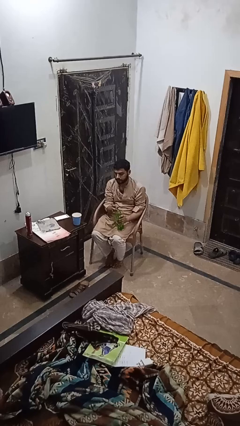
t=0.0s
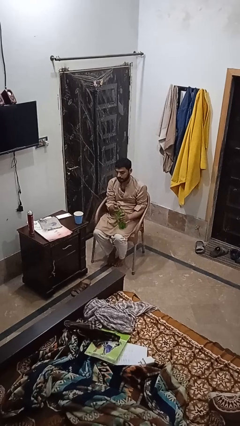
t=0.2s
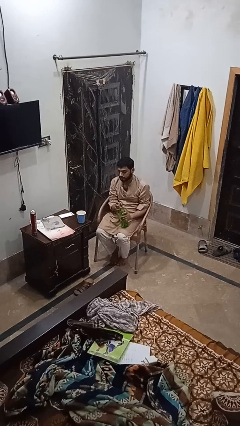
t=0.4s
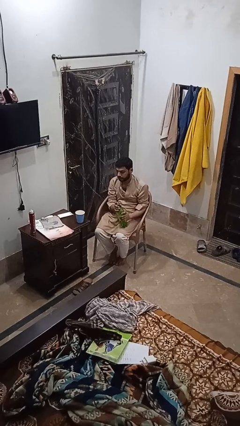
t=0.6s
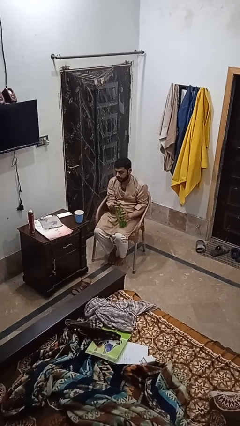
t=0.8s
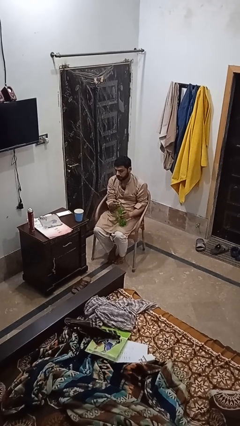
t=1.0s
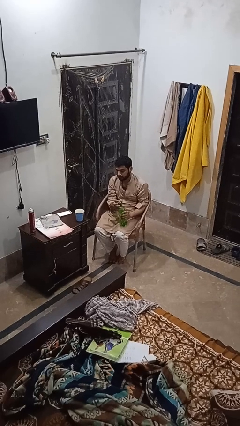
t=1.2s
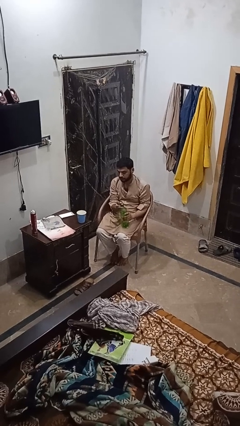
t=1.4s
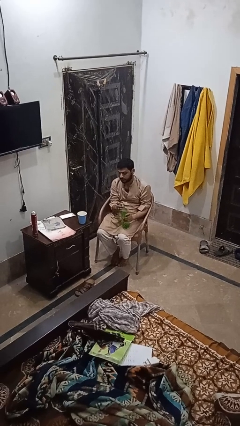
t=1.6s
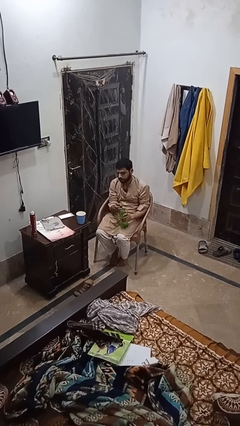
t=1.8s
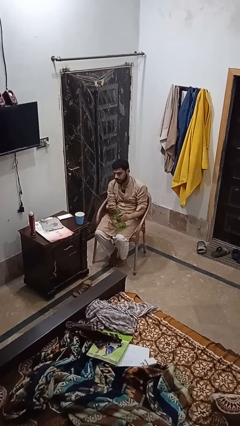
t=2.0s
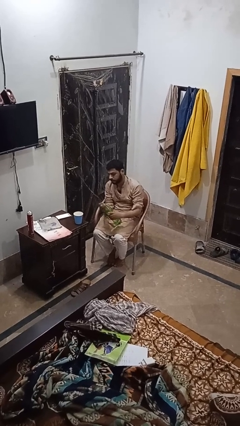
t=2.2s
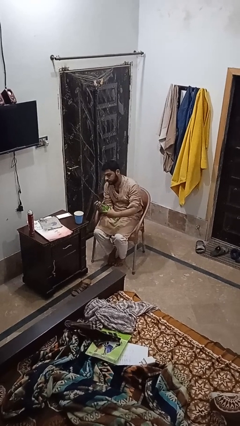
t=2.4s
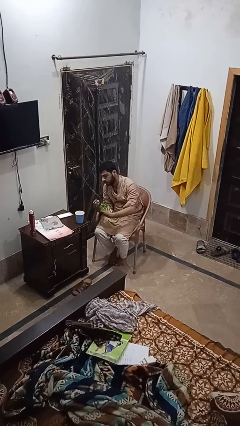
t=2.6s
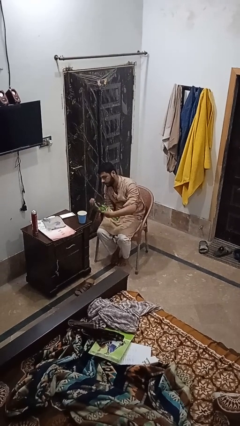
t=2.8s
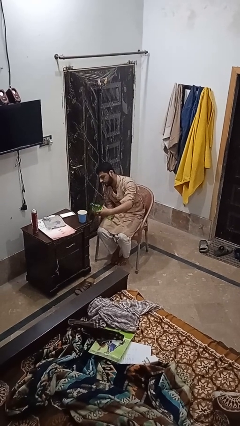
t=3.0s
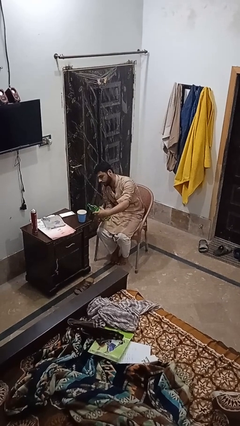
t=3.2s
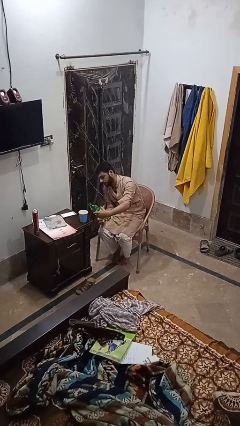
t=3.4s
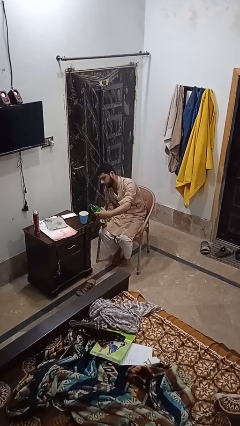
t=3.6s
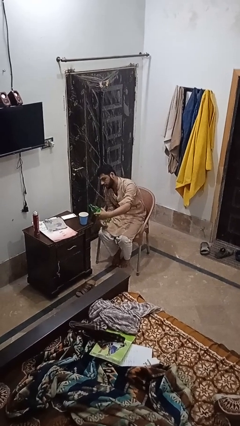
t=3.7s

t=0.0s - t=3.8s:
person unscrews lid from bottle

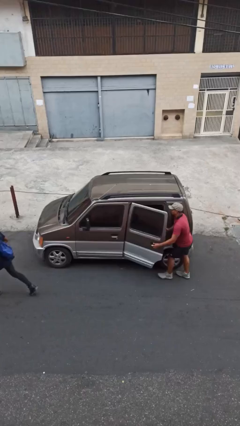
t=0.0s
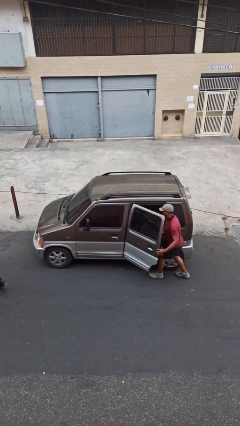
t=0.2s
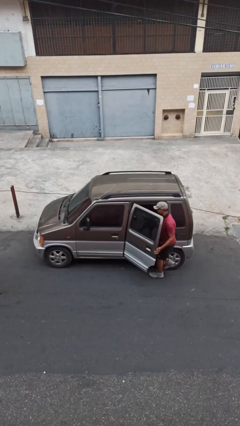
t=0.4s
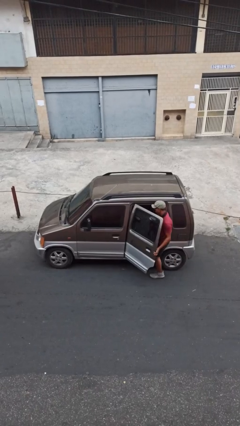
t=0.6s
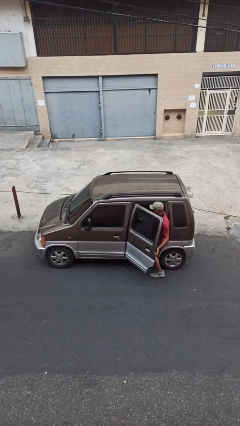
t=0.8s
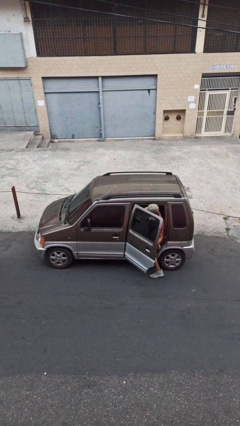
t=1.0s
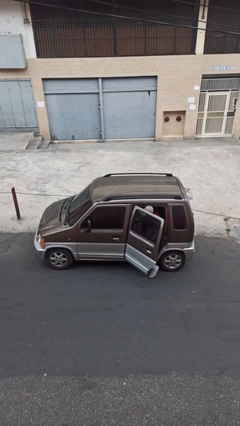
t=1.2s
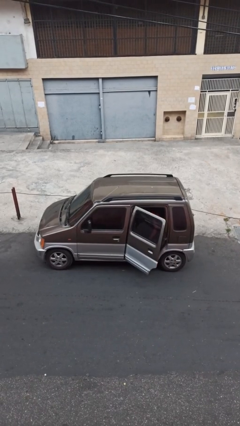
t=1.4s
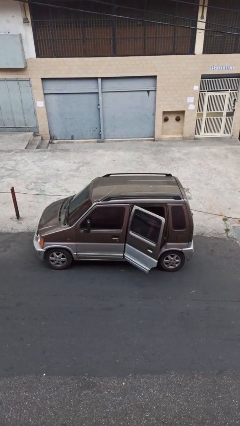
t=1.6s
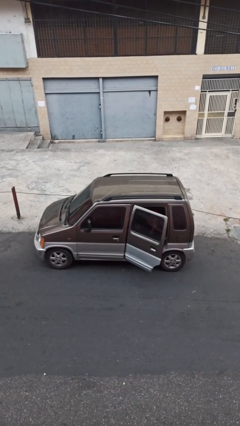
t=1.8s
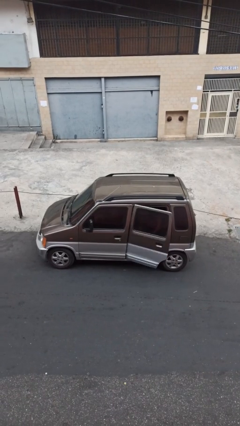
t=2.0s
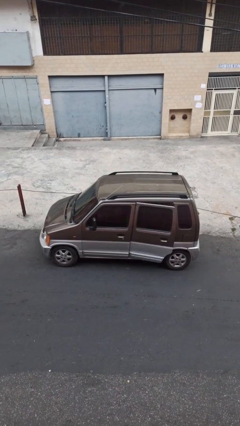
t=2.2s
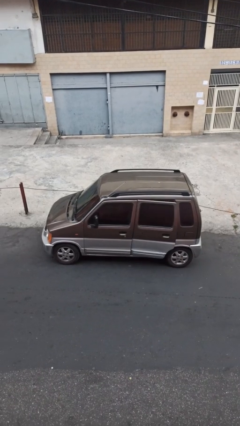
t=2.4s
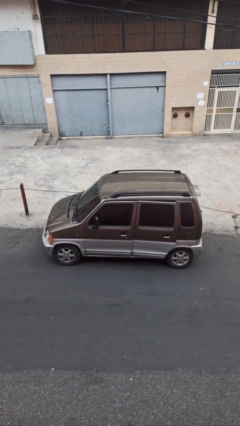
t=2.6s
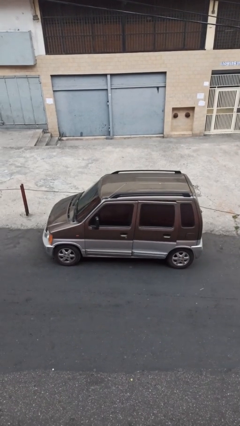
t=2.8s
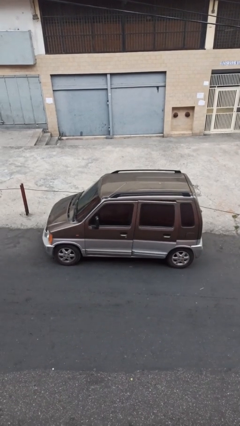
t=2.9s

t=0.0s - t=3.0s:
car picks up person

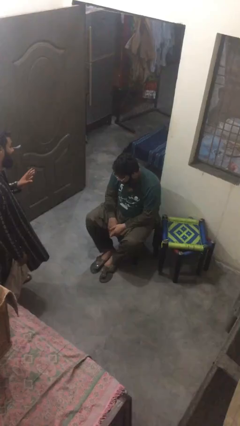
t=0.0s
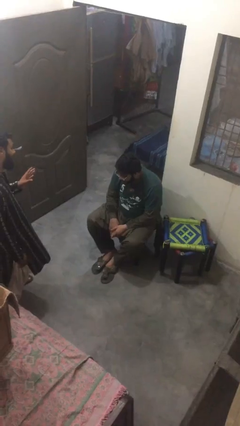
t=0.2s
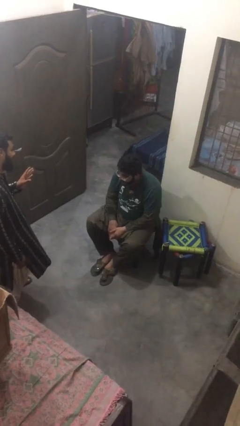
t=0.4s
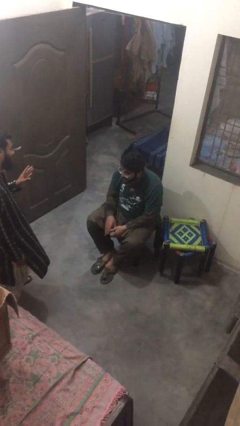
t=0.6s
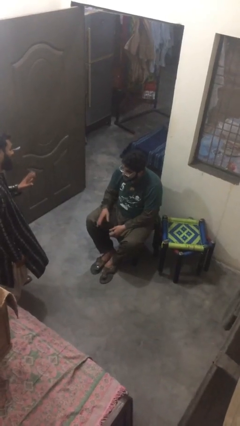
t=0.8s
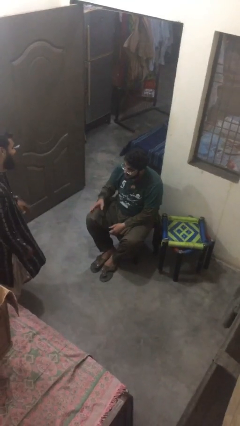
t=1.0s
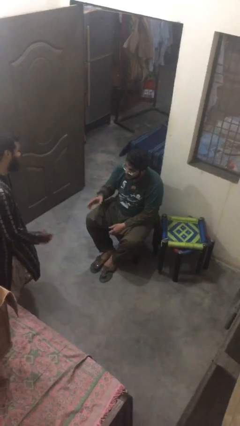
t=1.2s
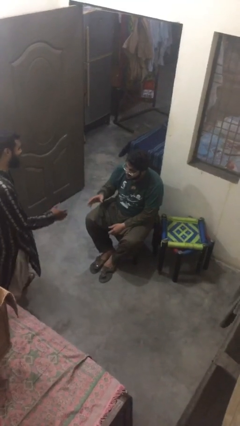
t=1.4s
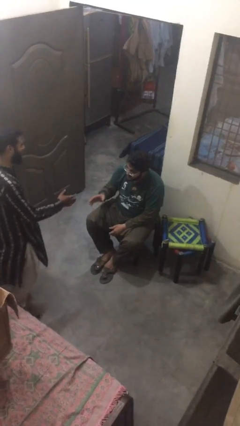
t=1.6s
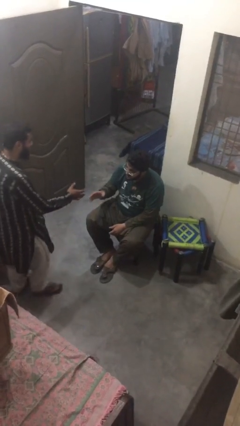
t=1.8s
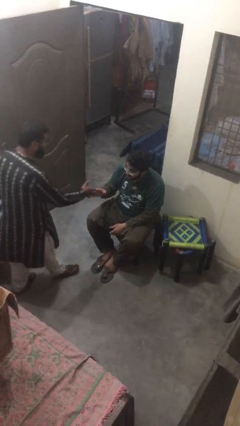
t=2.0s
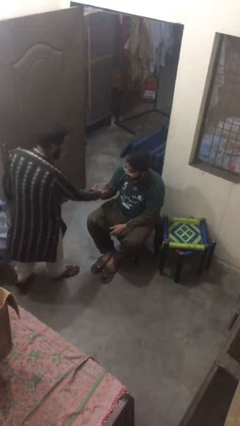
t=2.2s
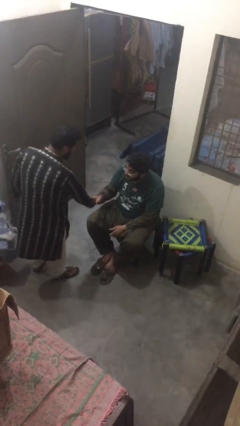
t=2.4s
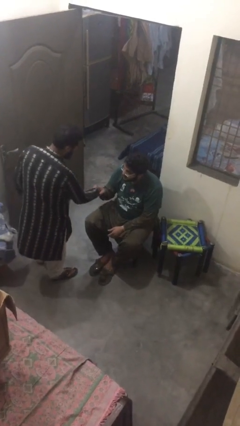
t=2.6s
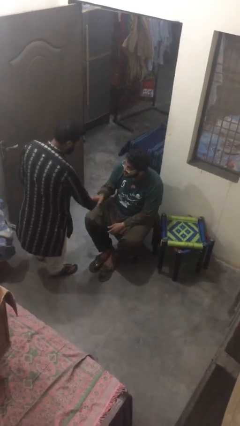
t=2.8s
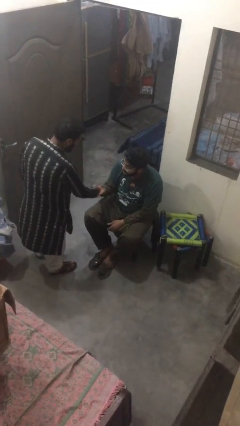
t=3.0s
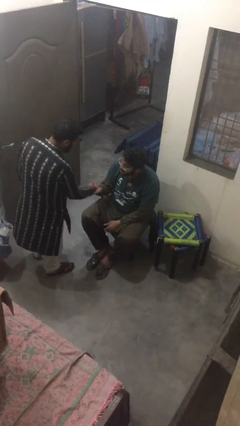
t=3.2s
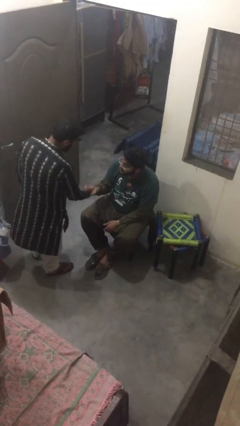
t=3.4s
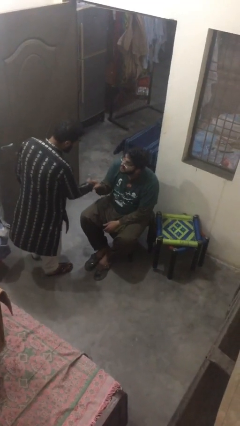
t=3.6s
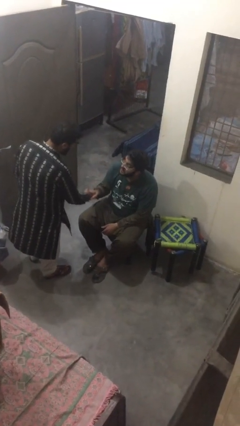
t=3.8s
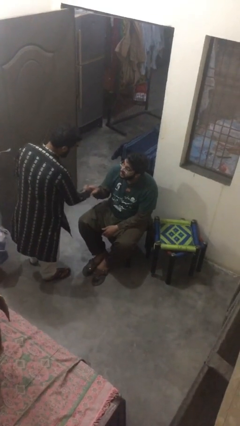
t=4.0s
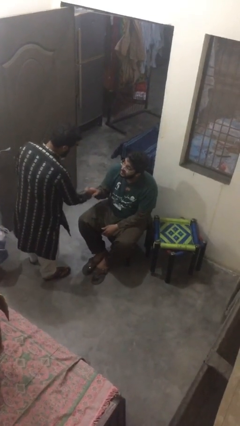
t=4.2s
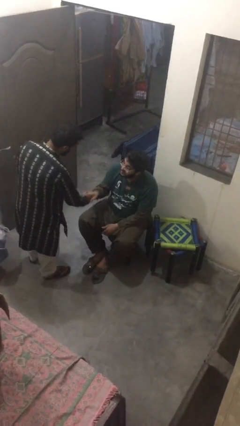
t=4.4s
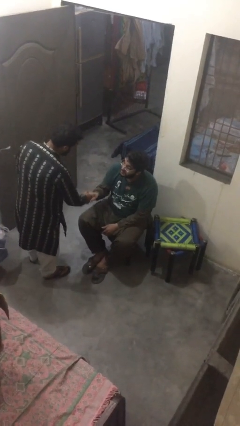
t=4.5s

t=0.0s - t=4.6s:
person shakes hand

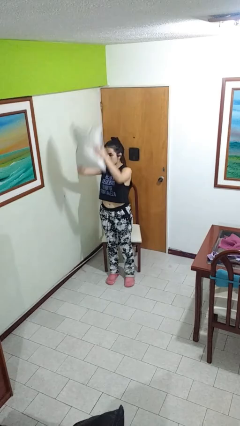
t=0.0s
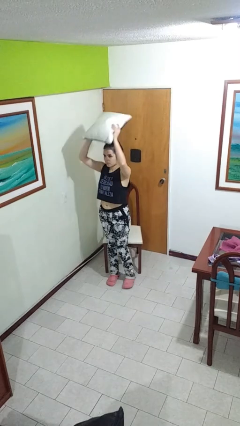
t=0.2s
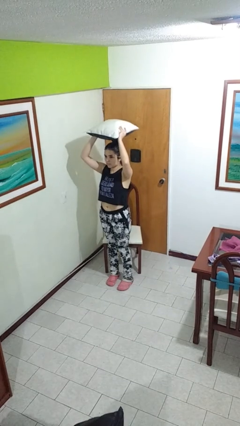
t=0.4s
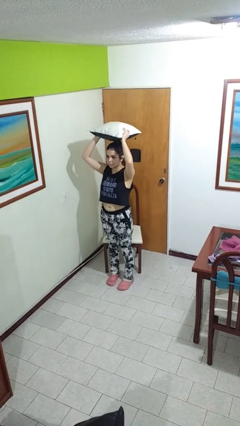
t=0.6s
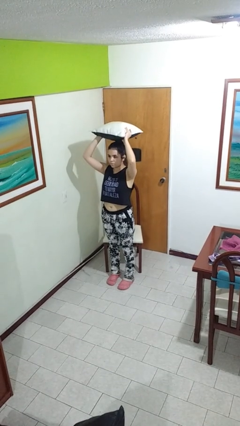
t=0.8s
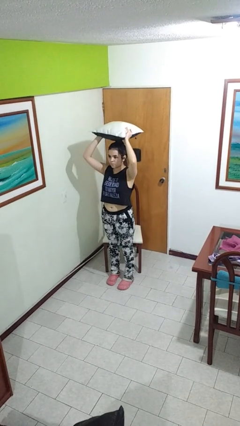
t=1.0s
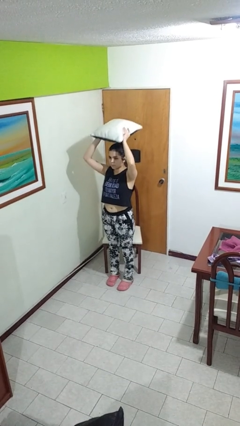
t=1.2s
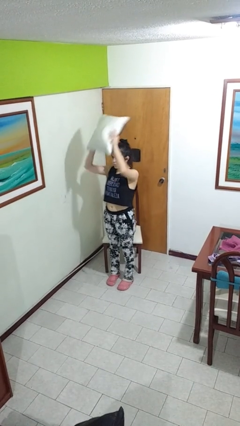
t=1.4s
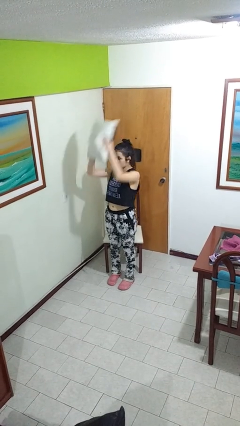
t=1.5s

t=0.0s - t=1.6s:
person holds object above head

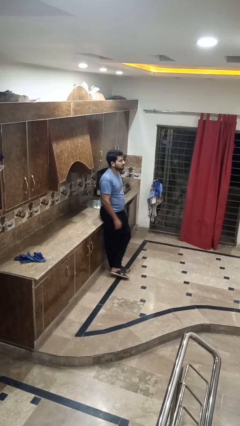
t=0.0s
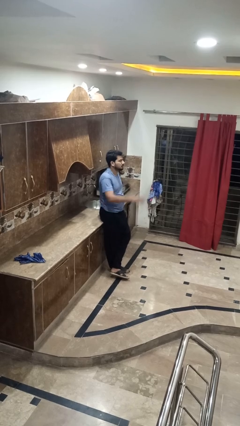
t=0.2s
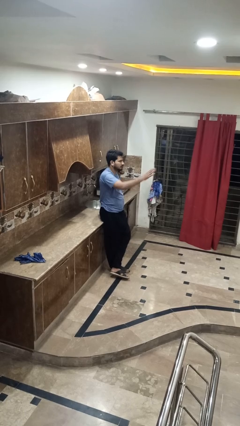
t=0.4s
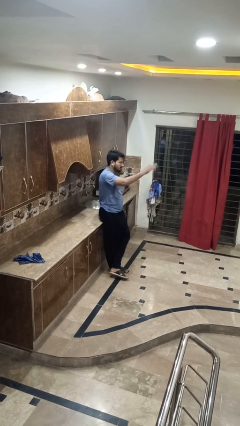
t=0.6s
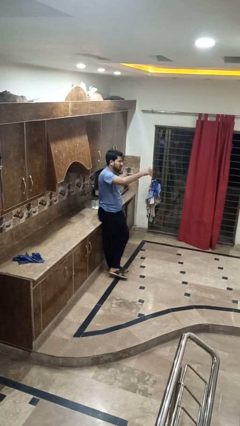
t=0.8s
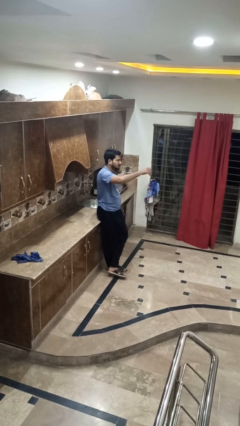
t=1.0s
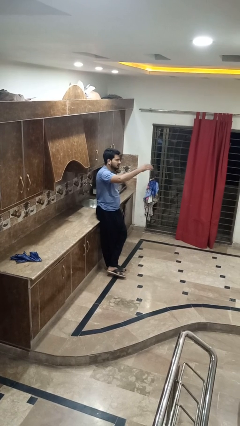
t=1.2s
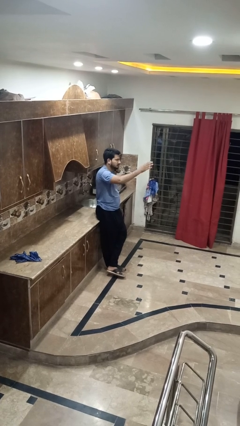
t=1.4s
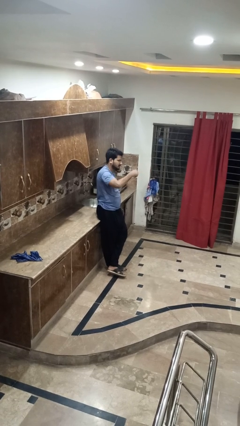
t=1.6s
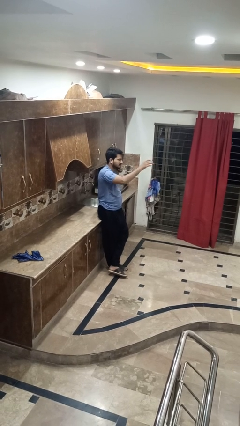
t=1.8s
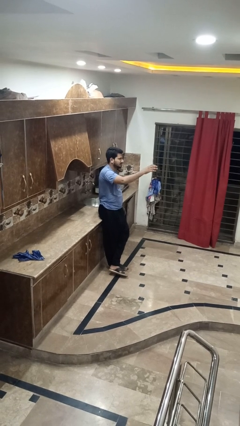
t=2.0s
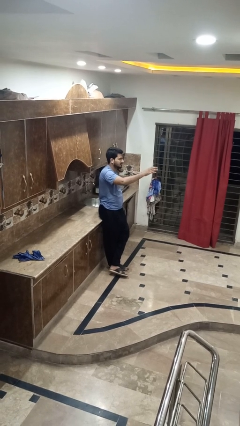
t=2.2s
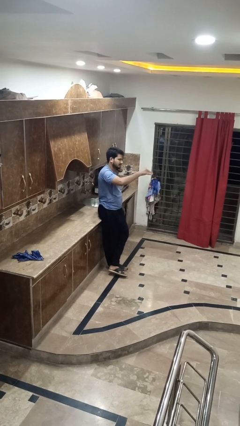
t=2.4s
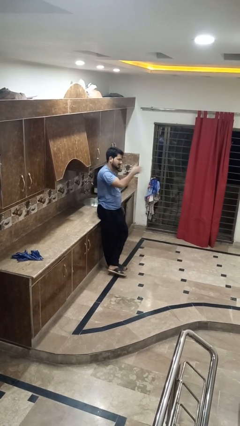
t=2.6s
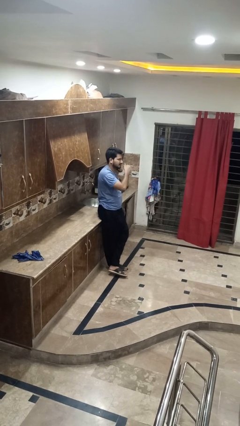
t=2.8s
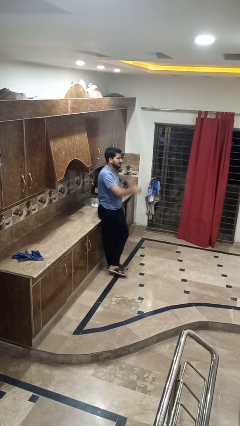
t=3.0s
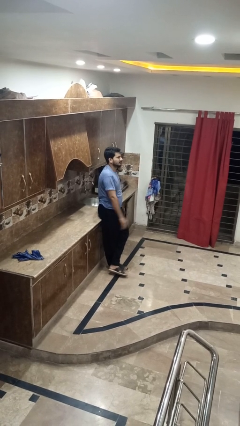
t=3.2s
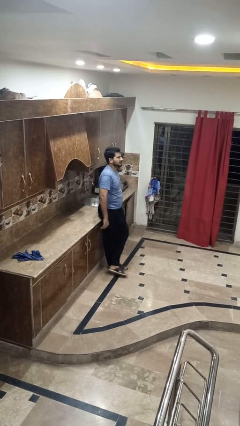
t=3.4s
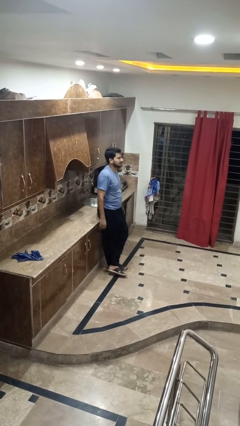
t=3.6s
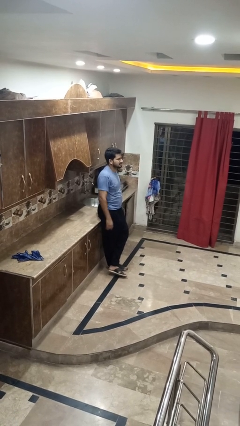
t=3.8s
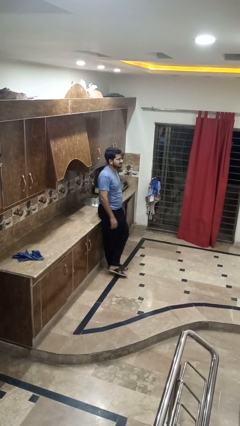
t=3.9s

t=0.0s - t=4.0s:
person gestures come here

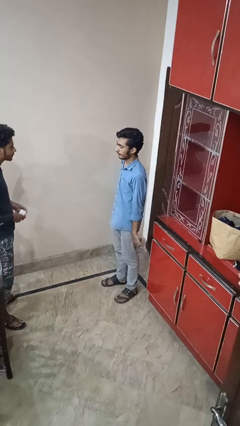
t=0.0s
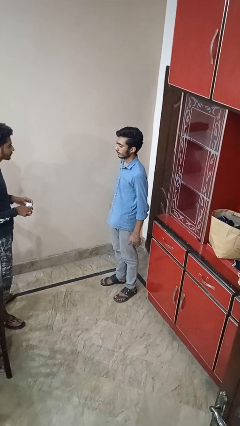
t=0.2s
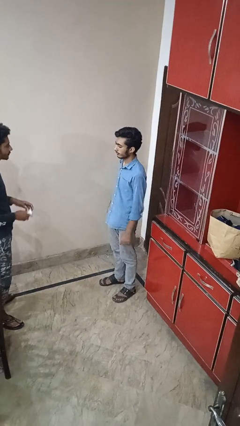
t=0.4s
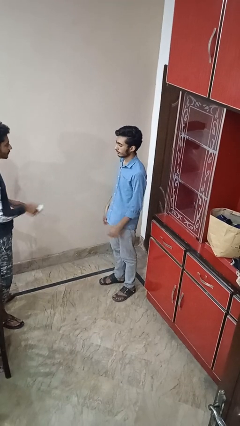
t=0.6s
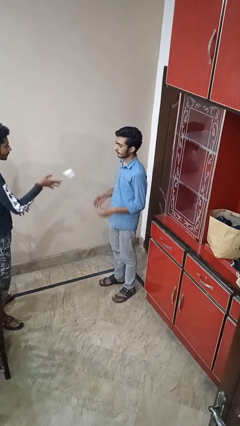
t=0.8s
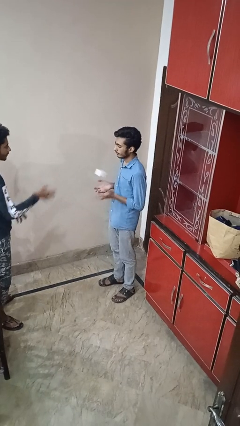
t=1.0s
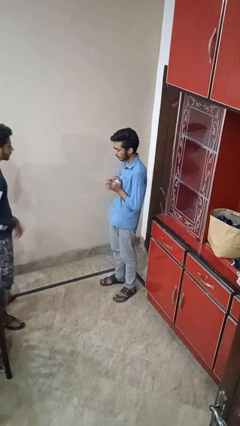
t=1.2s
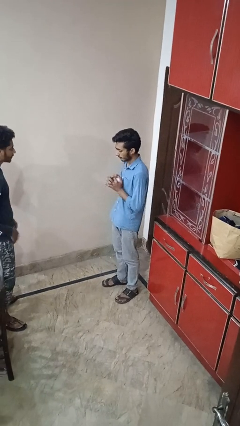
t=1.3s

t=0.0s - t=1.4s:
person catches object from person
